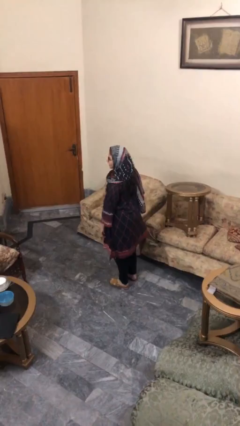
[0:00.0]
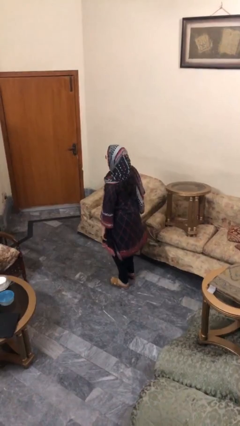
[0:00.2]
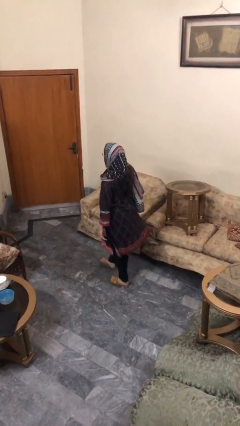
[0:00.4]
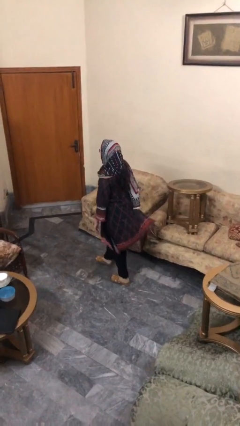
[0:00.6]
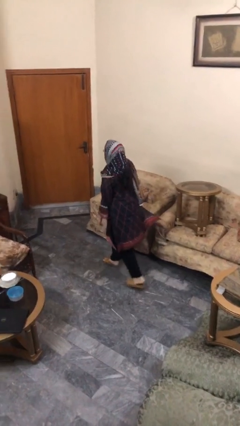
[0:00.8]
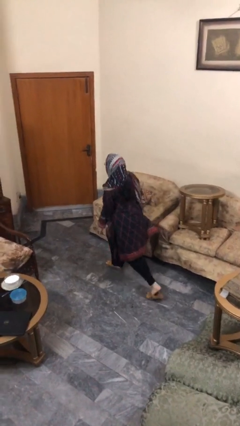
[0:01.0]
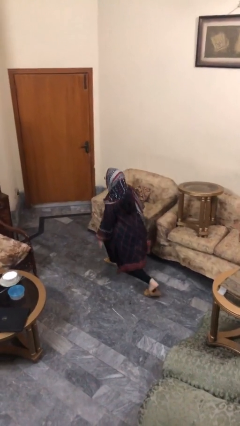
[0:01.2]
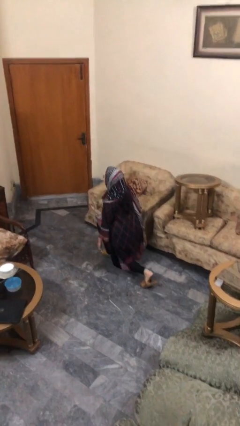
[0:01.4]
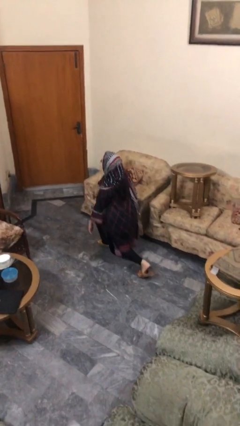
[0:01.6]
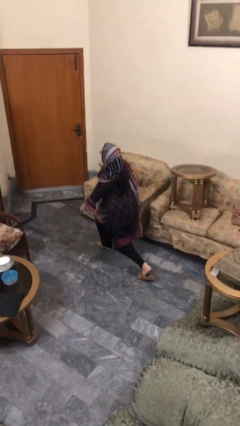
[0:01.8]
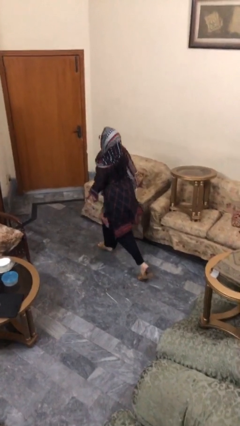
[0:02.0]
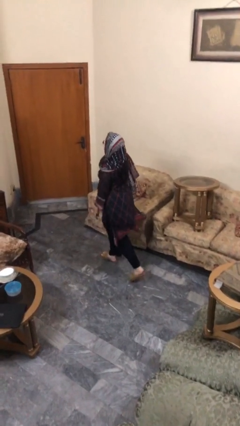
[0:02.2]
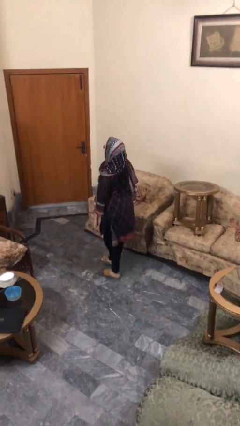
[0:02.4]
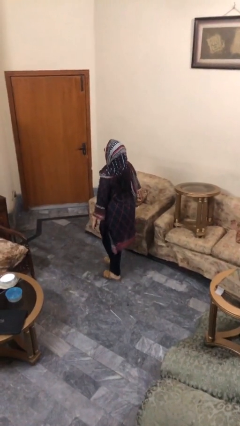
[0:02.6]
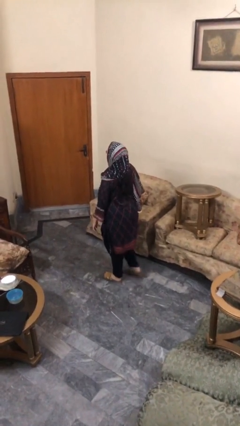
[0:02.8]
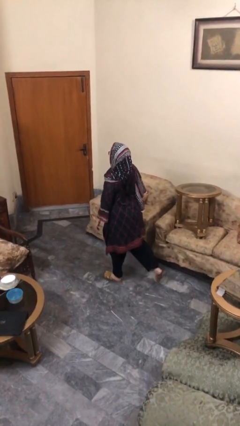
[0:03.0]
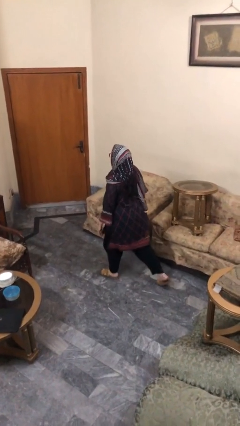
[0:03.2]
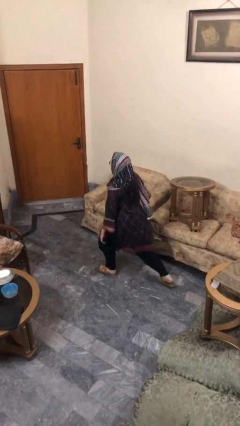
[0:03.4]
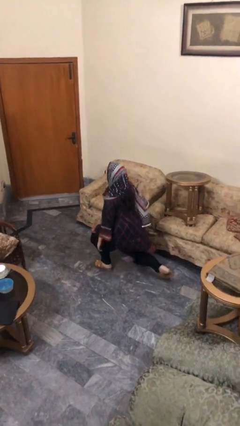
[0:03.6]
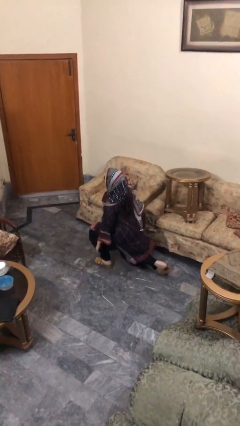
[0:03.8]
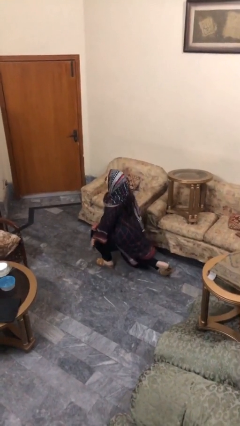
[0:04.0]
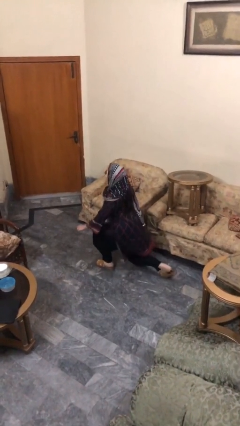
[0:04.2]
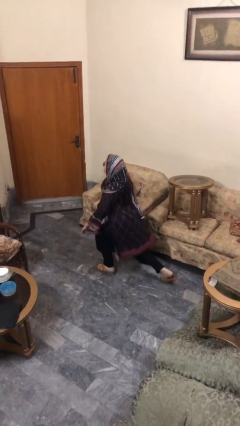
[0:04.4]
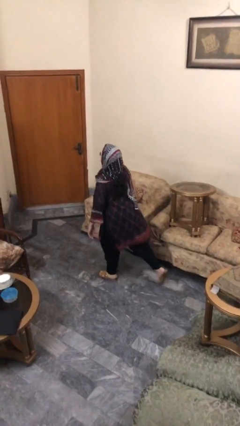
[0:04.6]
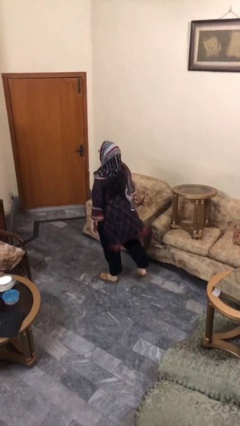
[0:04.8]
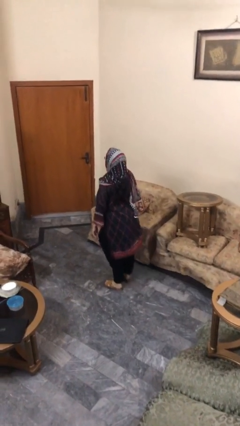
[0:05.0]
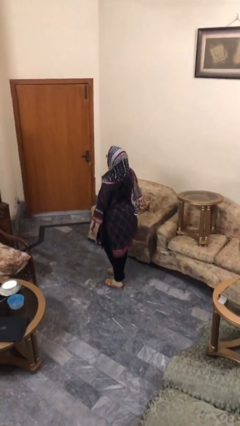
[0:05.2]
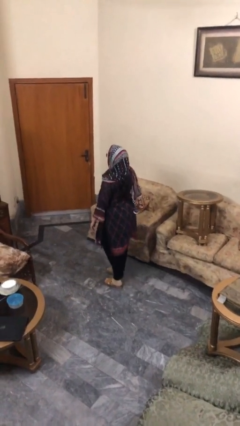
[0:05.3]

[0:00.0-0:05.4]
person exercises with lunges

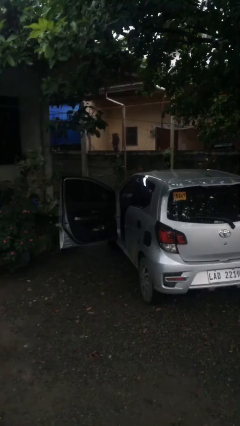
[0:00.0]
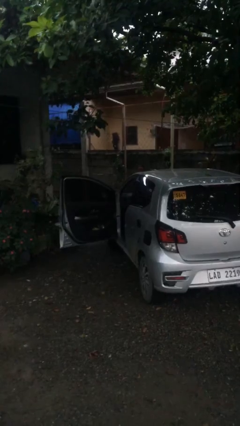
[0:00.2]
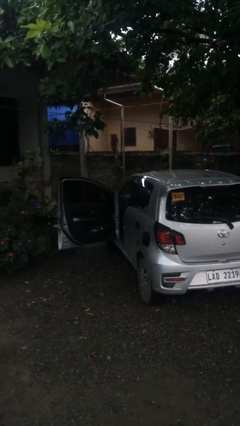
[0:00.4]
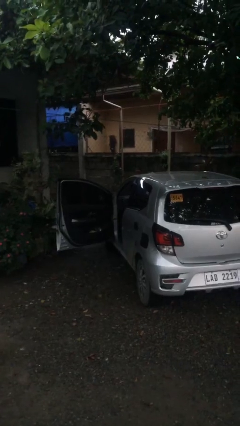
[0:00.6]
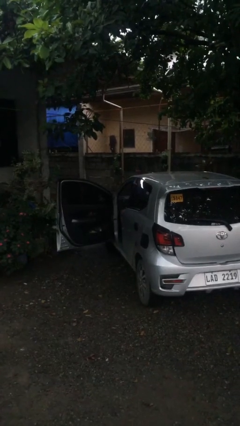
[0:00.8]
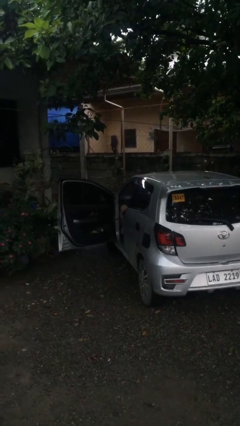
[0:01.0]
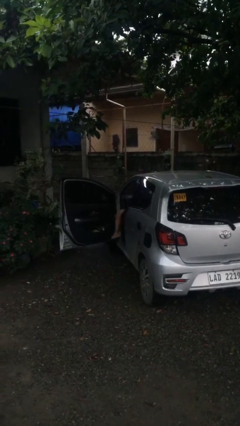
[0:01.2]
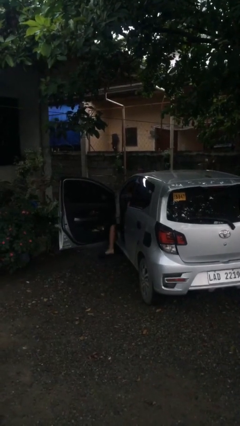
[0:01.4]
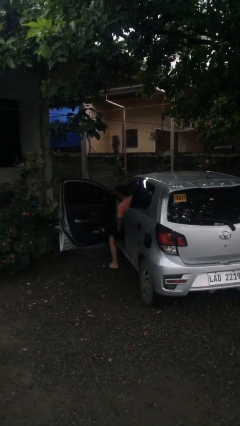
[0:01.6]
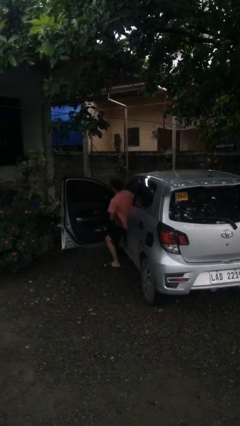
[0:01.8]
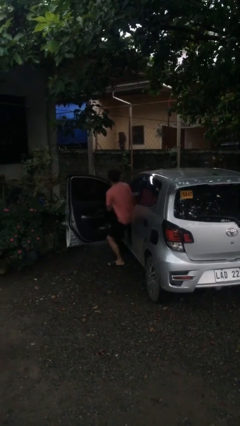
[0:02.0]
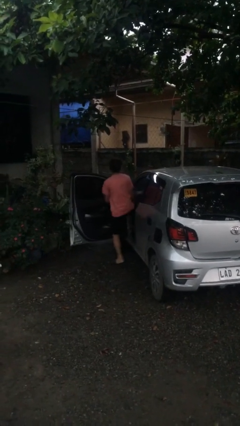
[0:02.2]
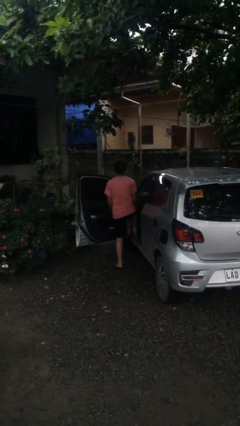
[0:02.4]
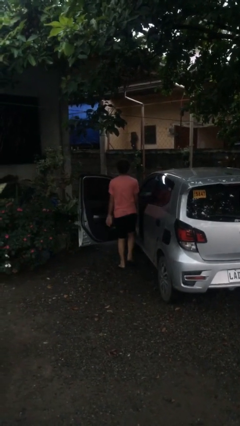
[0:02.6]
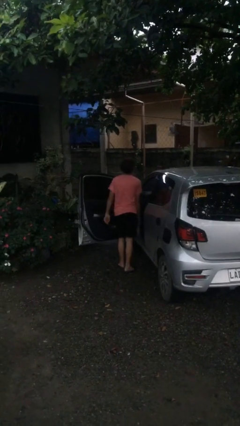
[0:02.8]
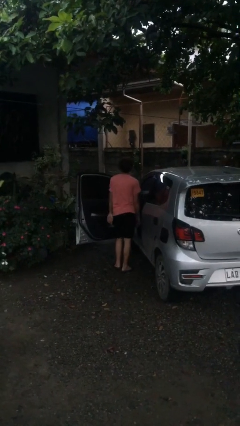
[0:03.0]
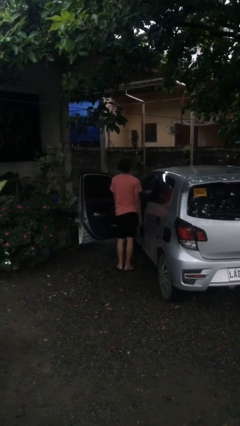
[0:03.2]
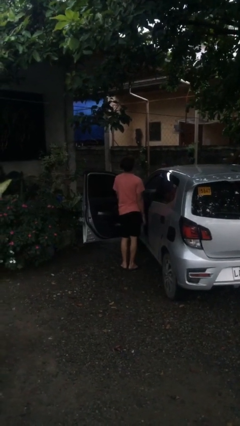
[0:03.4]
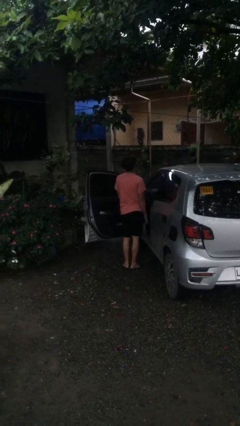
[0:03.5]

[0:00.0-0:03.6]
person exits car

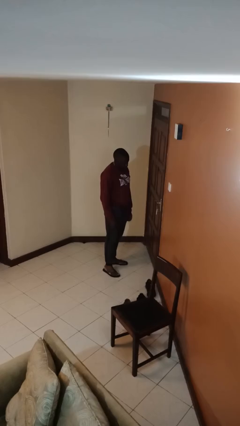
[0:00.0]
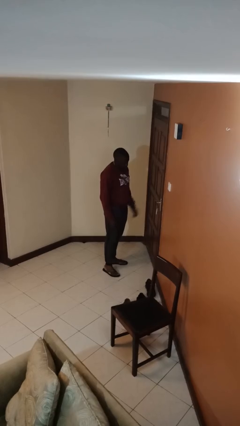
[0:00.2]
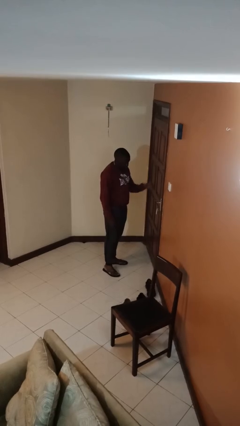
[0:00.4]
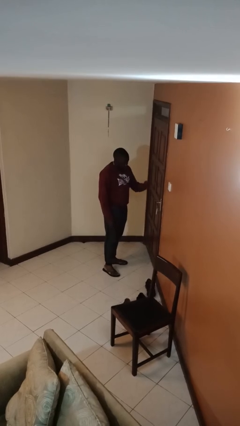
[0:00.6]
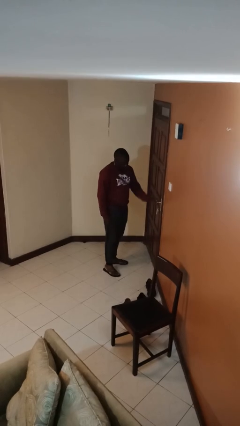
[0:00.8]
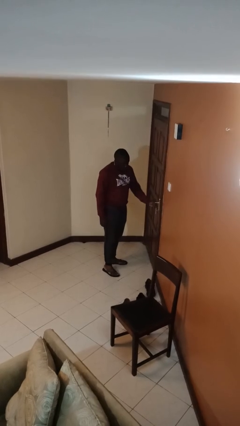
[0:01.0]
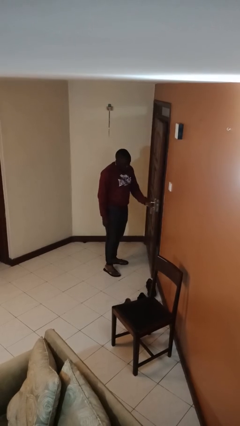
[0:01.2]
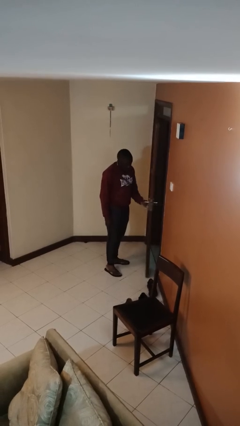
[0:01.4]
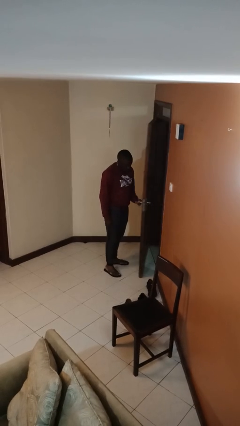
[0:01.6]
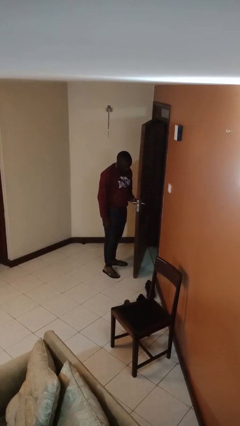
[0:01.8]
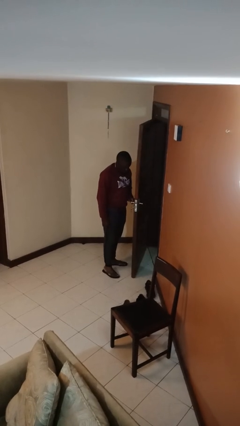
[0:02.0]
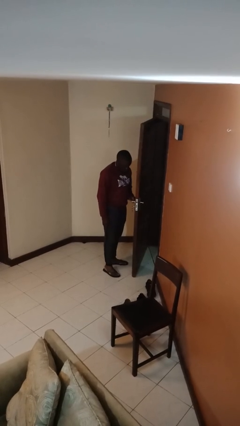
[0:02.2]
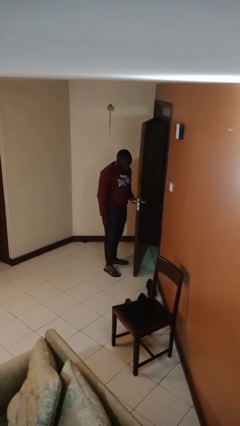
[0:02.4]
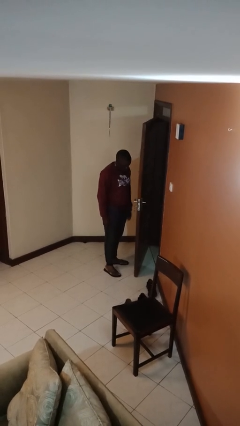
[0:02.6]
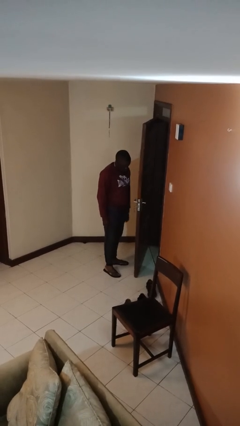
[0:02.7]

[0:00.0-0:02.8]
person opens facility door

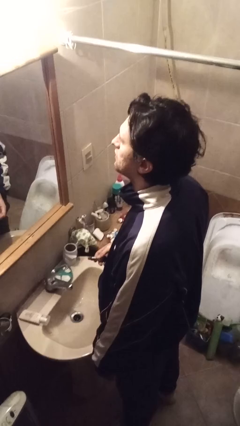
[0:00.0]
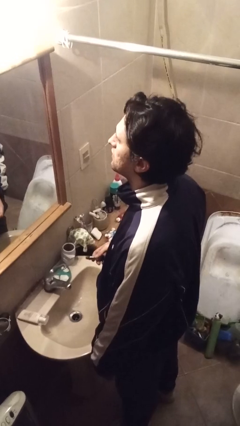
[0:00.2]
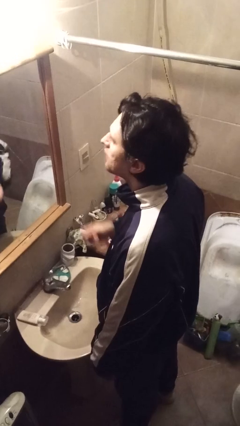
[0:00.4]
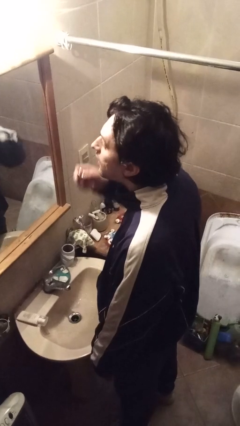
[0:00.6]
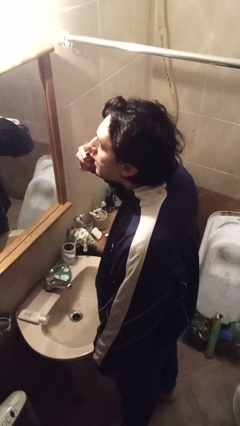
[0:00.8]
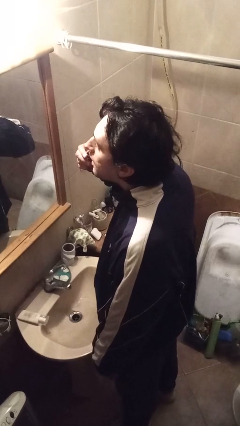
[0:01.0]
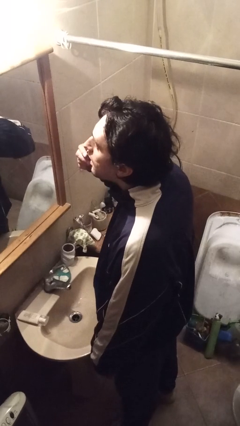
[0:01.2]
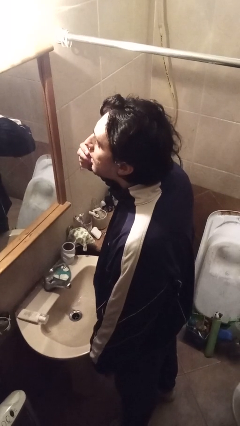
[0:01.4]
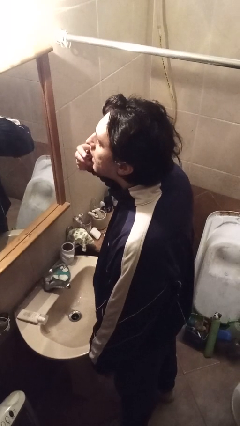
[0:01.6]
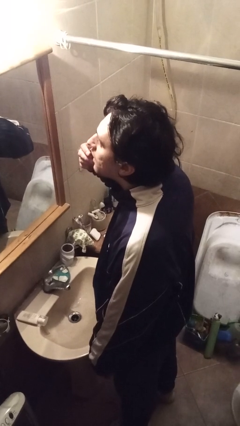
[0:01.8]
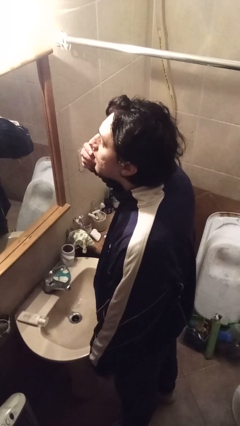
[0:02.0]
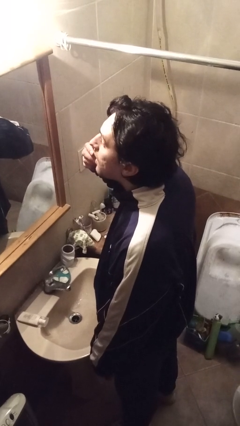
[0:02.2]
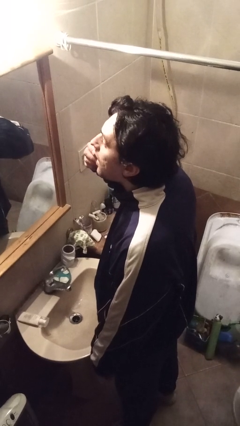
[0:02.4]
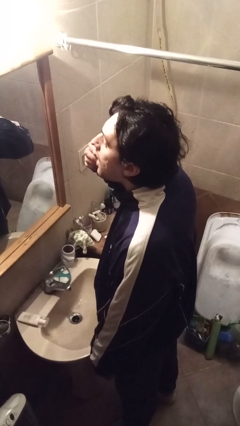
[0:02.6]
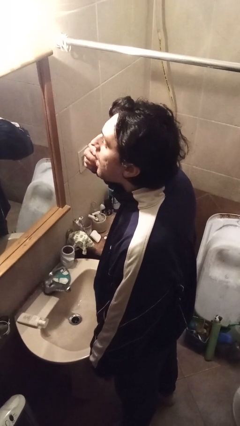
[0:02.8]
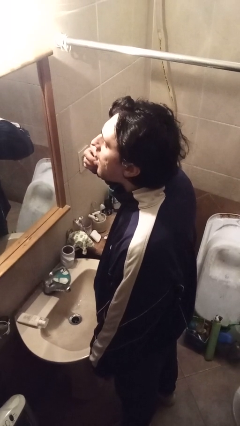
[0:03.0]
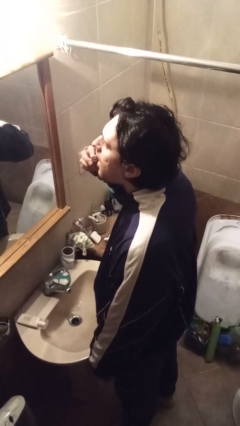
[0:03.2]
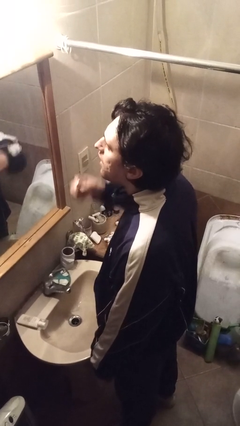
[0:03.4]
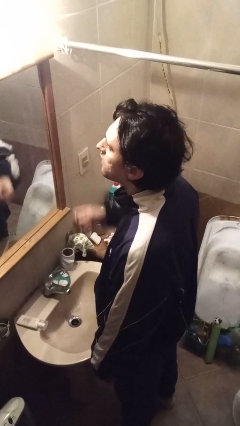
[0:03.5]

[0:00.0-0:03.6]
person applies lip makeup

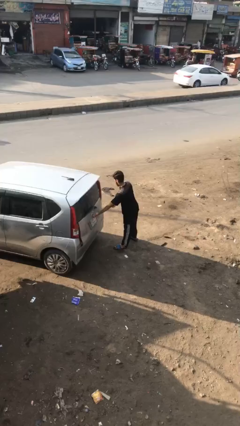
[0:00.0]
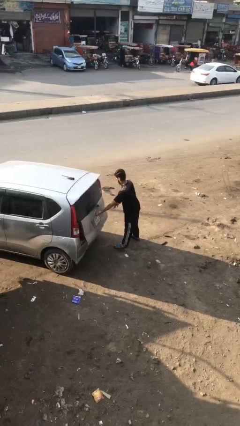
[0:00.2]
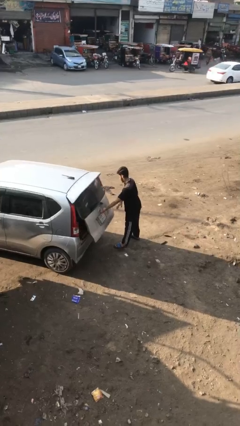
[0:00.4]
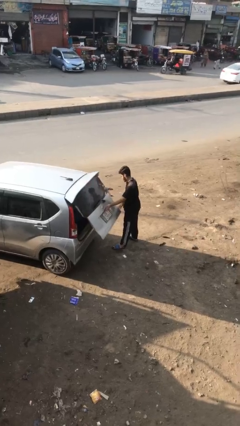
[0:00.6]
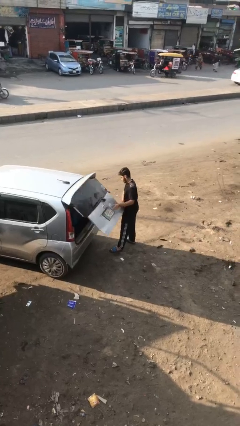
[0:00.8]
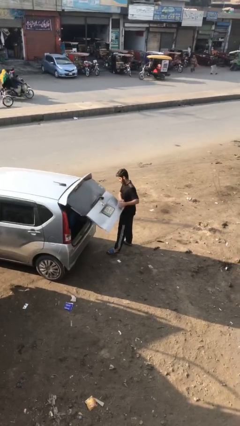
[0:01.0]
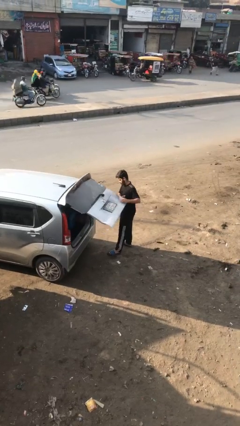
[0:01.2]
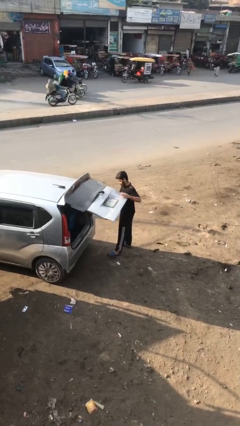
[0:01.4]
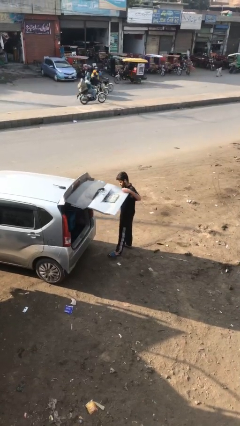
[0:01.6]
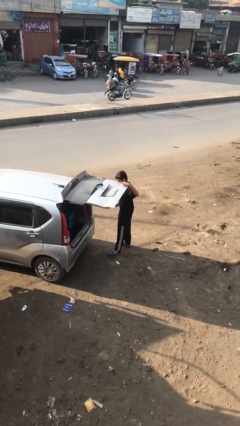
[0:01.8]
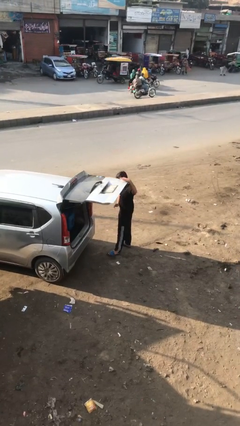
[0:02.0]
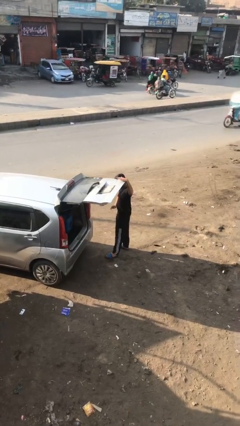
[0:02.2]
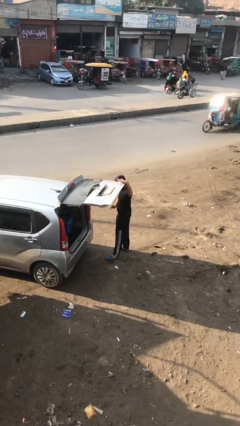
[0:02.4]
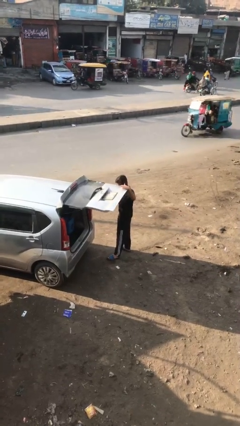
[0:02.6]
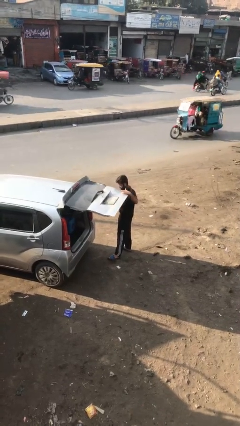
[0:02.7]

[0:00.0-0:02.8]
person opens car trunk
